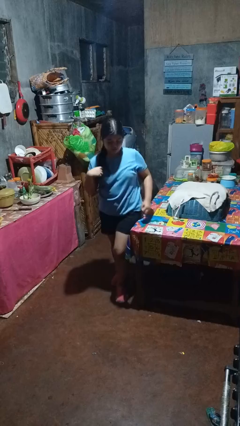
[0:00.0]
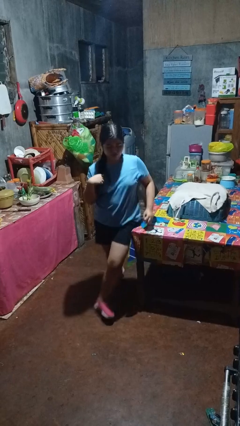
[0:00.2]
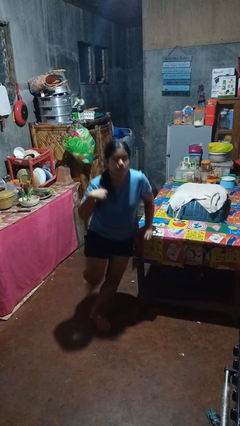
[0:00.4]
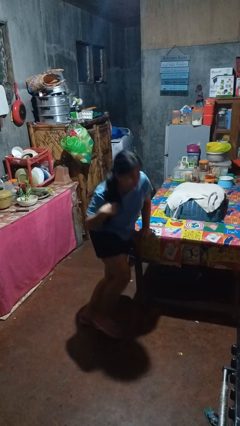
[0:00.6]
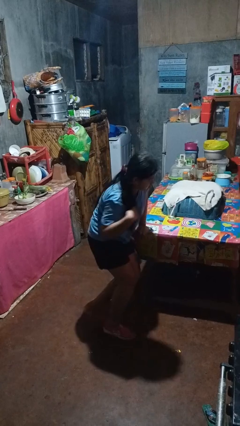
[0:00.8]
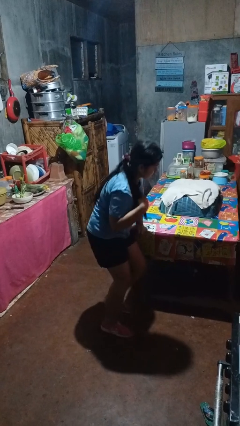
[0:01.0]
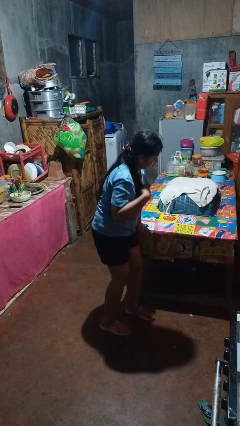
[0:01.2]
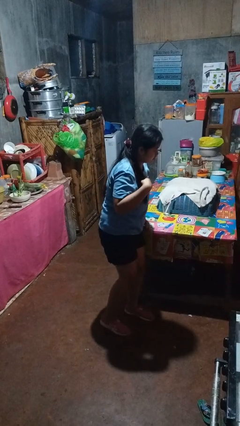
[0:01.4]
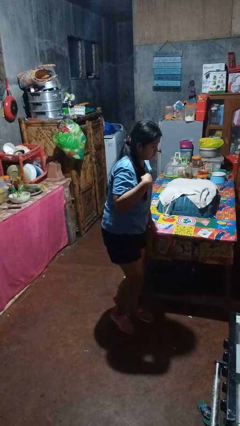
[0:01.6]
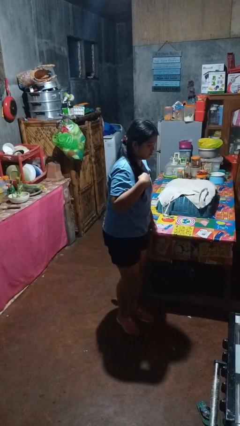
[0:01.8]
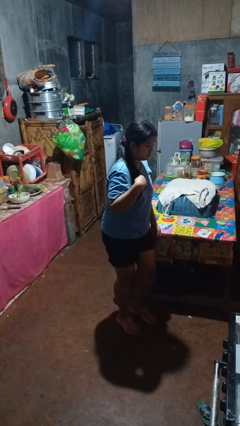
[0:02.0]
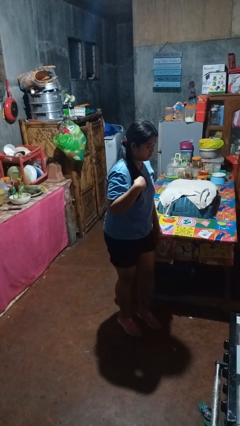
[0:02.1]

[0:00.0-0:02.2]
person bumps into table

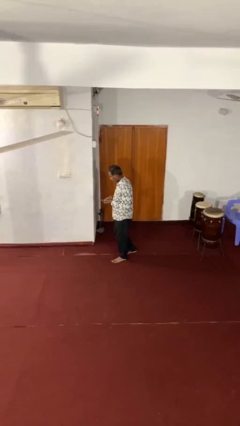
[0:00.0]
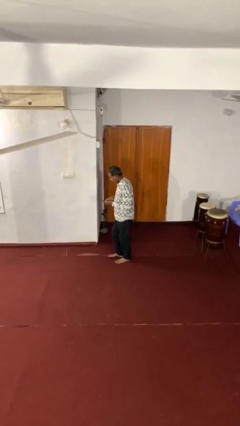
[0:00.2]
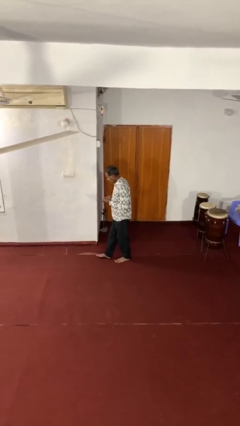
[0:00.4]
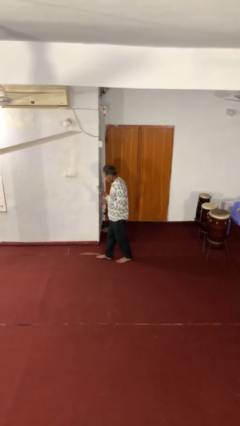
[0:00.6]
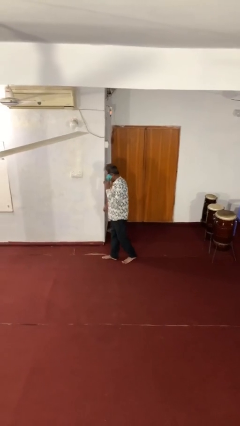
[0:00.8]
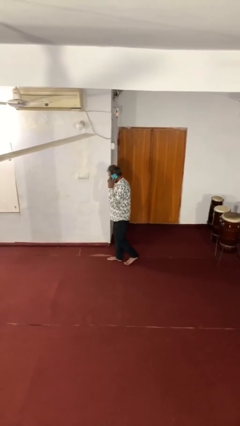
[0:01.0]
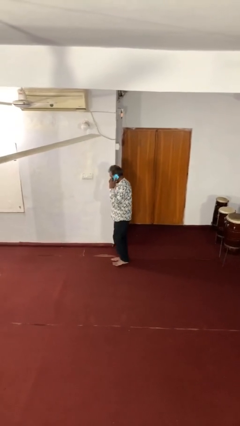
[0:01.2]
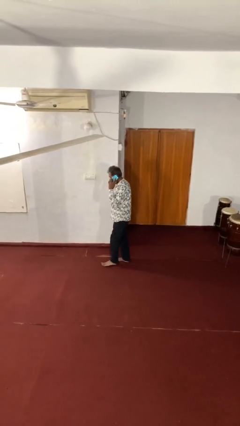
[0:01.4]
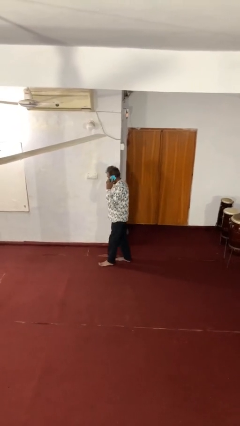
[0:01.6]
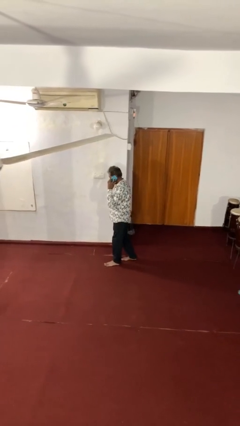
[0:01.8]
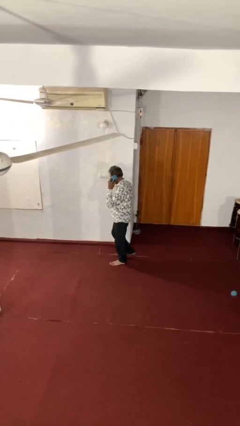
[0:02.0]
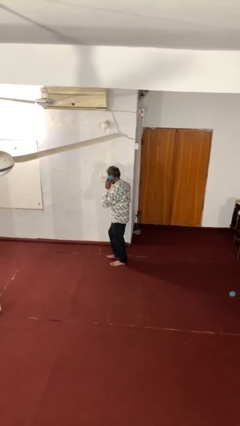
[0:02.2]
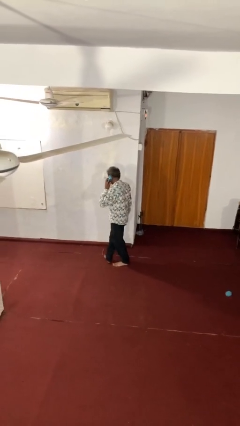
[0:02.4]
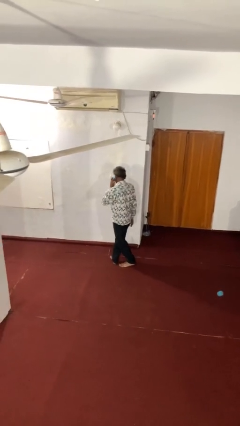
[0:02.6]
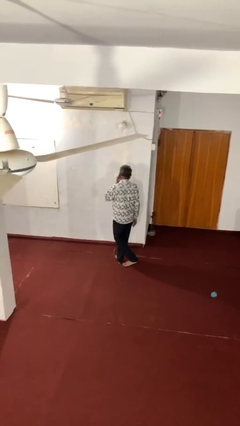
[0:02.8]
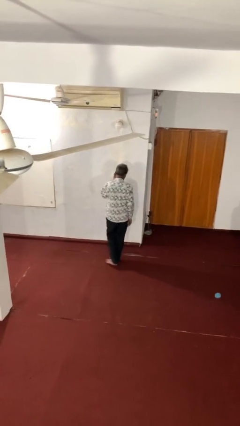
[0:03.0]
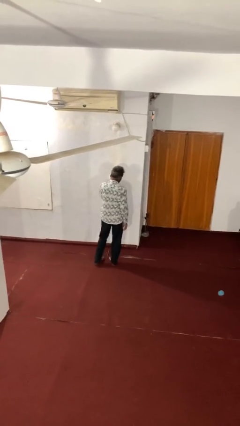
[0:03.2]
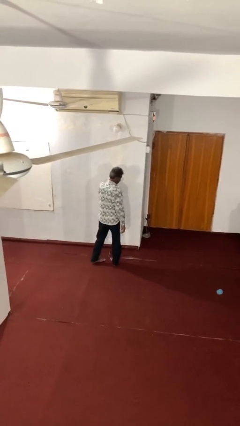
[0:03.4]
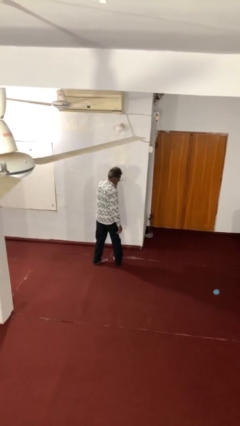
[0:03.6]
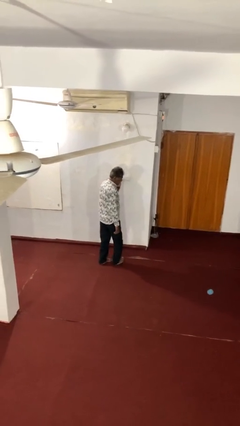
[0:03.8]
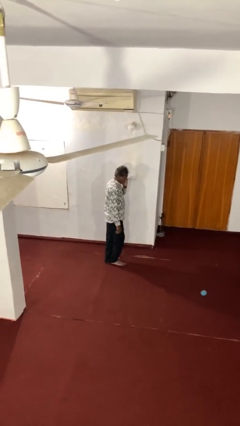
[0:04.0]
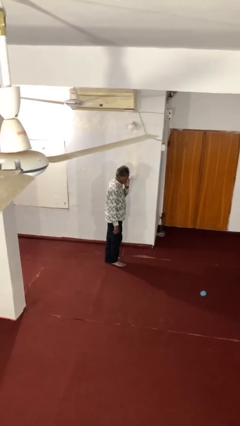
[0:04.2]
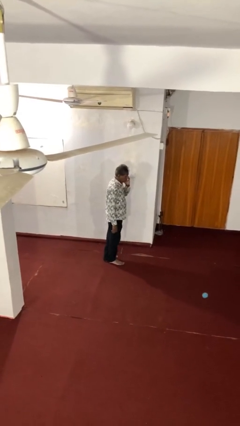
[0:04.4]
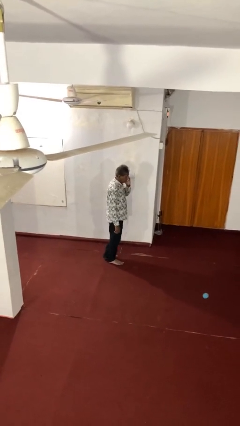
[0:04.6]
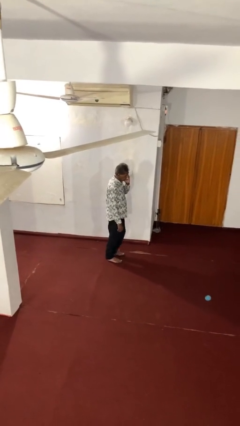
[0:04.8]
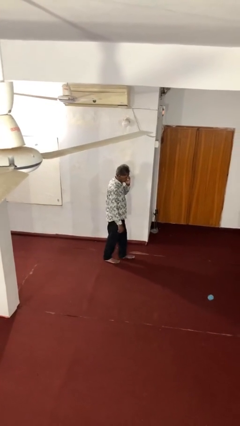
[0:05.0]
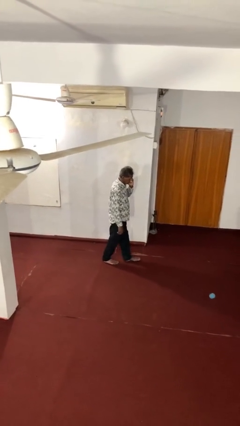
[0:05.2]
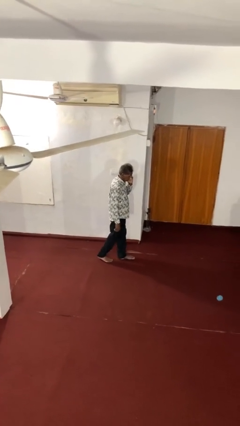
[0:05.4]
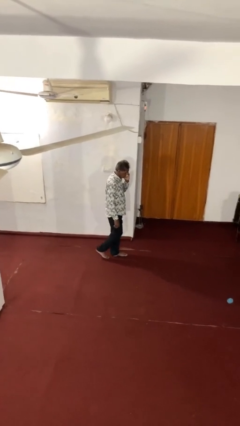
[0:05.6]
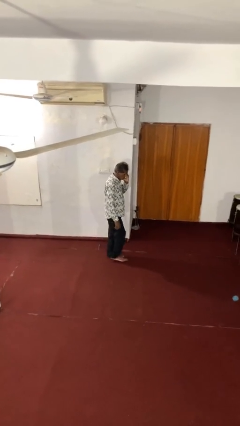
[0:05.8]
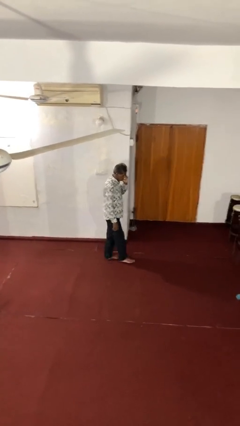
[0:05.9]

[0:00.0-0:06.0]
person talks on phone

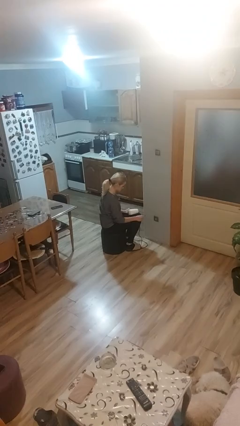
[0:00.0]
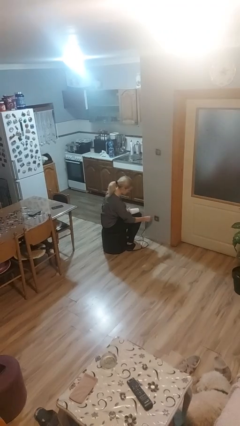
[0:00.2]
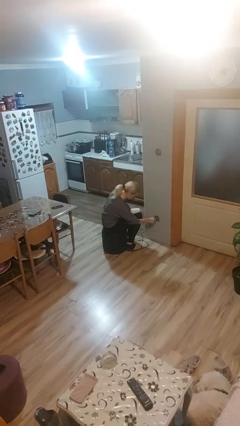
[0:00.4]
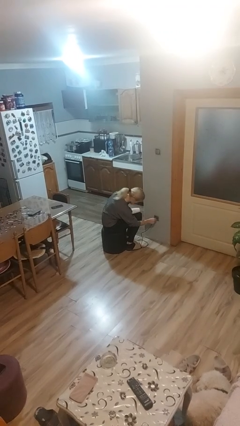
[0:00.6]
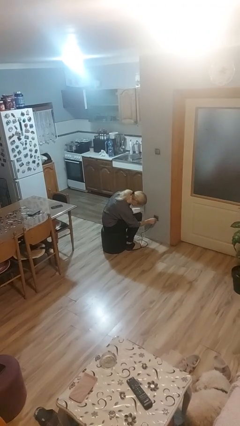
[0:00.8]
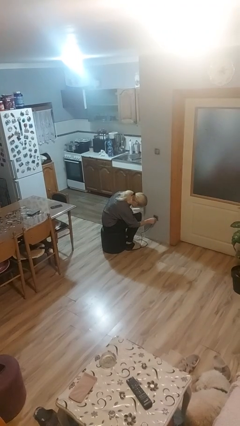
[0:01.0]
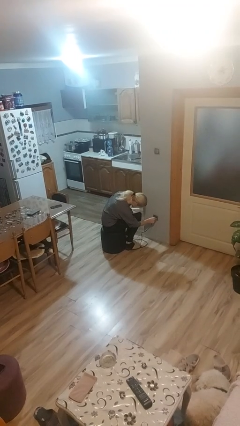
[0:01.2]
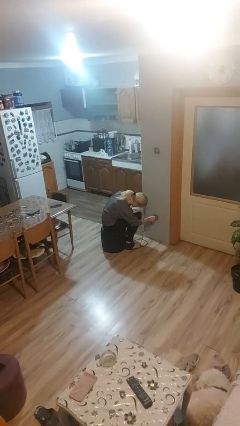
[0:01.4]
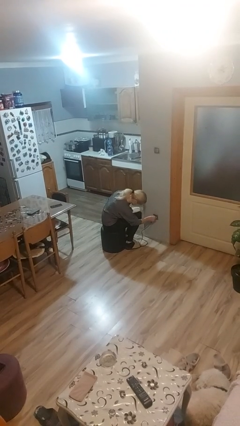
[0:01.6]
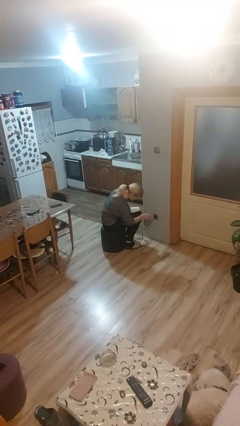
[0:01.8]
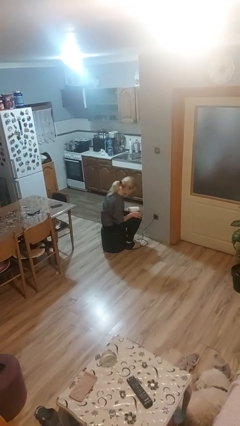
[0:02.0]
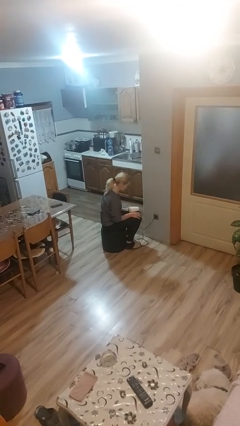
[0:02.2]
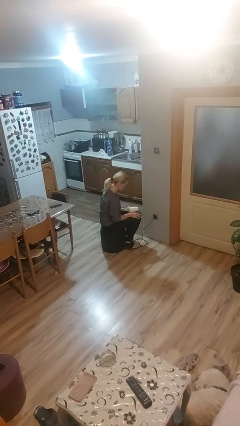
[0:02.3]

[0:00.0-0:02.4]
person plugs into electrical socket

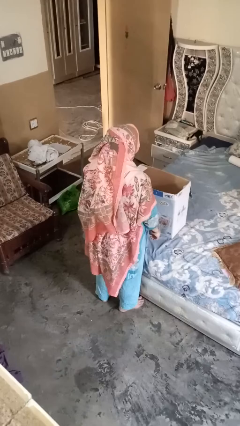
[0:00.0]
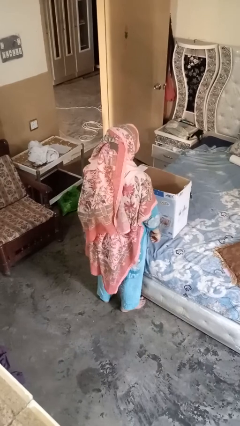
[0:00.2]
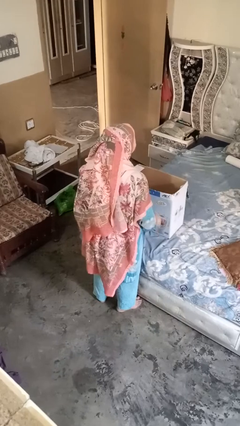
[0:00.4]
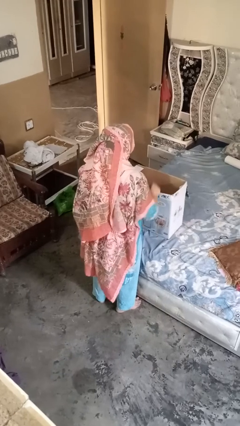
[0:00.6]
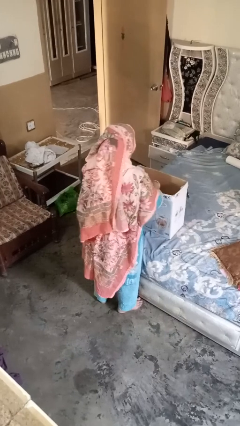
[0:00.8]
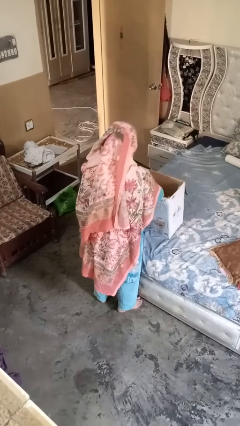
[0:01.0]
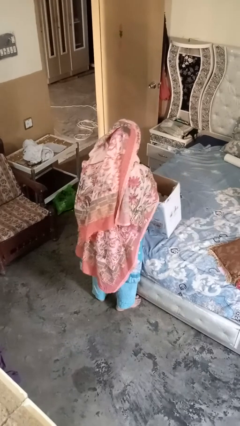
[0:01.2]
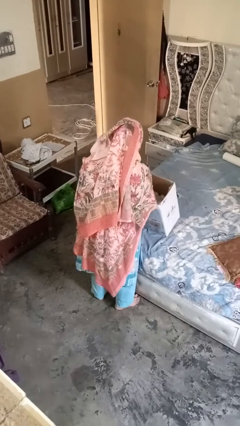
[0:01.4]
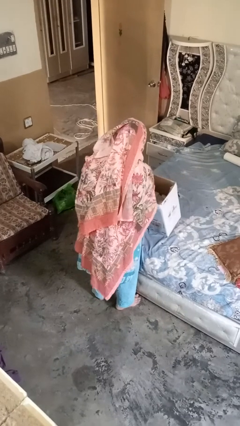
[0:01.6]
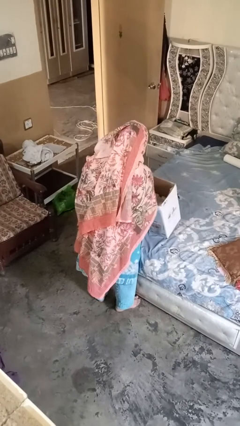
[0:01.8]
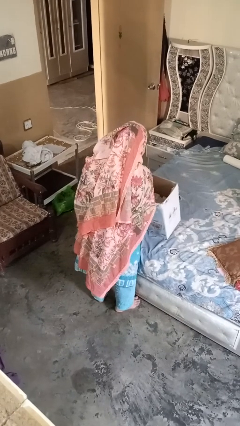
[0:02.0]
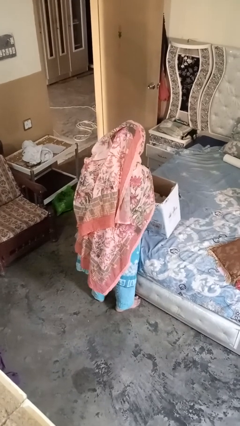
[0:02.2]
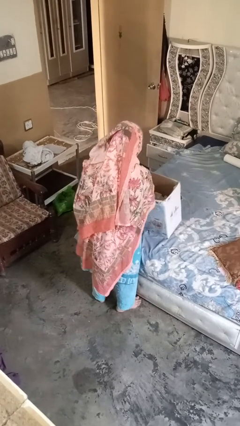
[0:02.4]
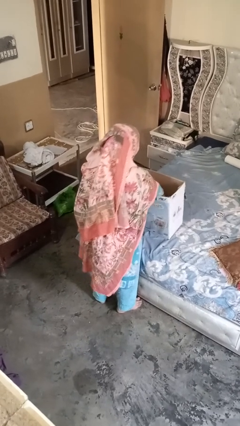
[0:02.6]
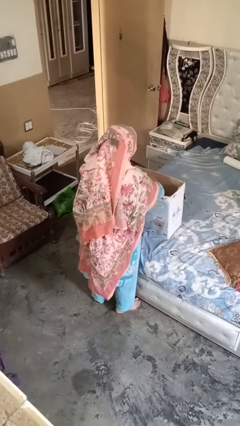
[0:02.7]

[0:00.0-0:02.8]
person searches in box

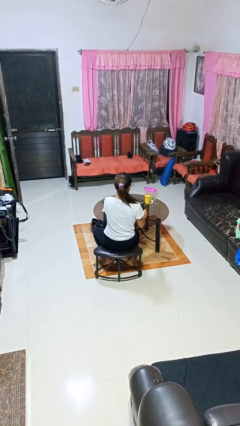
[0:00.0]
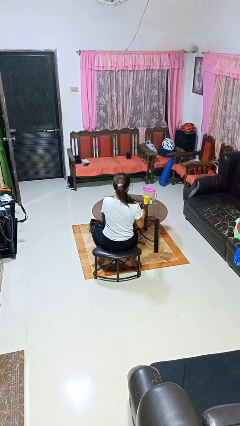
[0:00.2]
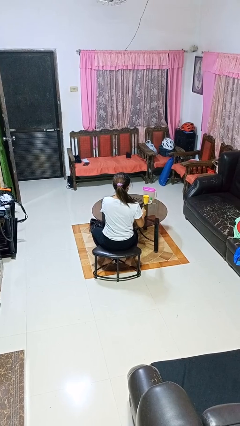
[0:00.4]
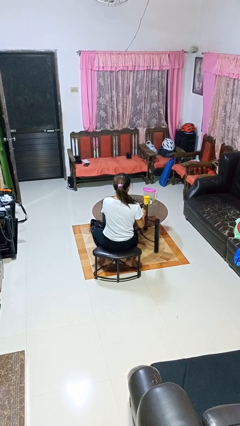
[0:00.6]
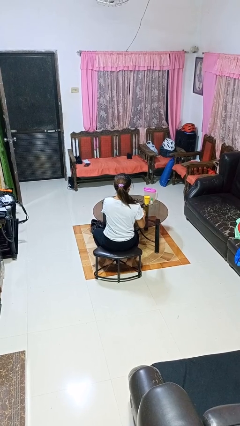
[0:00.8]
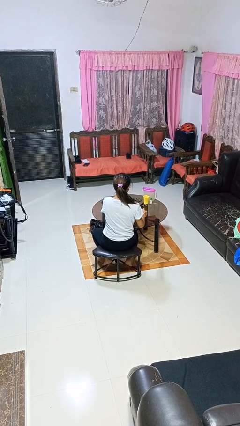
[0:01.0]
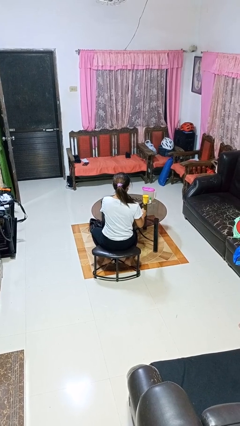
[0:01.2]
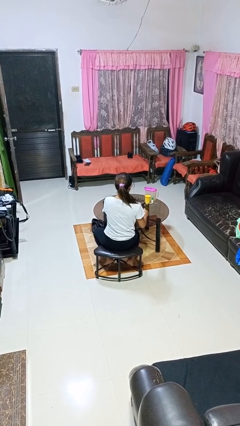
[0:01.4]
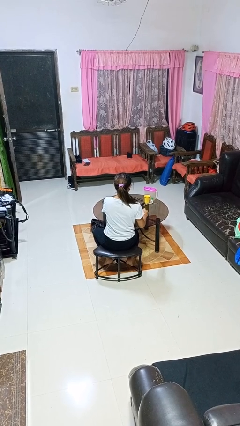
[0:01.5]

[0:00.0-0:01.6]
person stirs mug

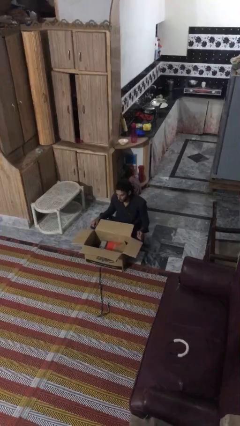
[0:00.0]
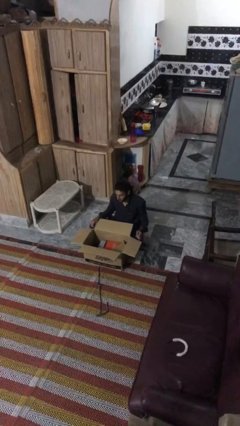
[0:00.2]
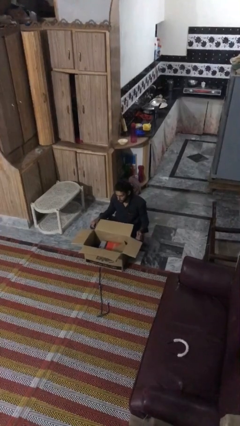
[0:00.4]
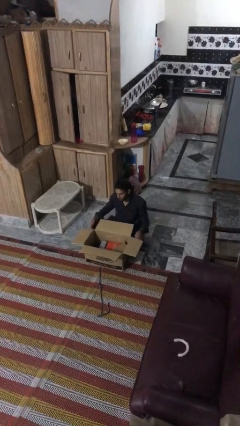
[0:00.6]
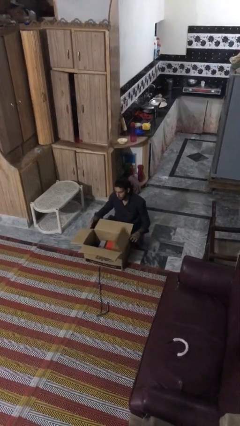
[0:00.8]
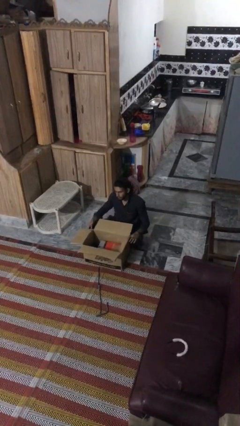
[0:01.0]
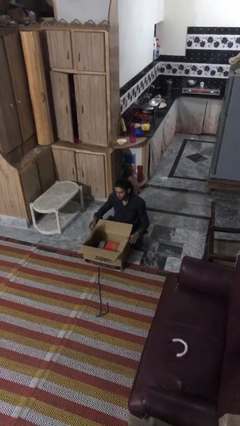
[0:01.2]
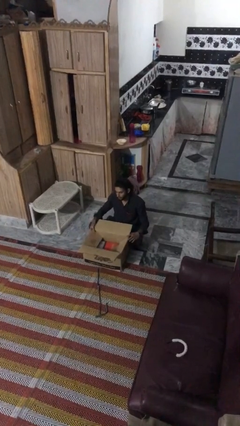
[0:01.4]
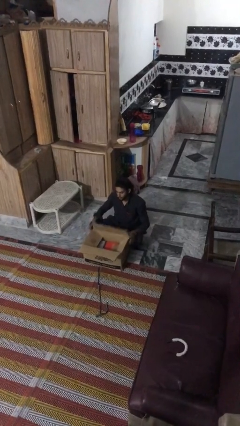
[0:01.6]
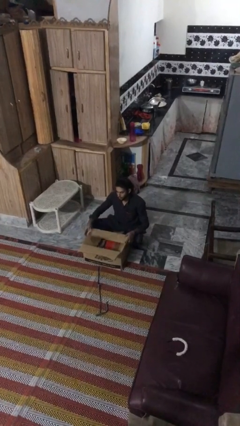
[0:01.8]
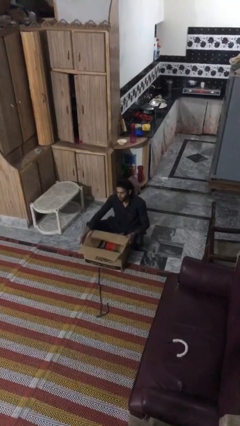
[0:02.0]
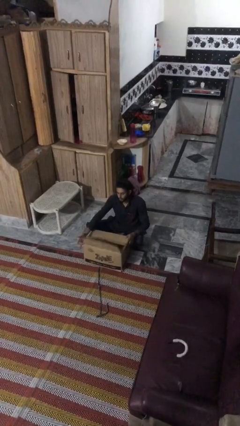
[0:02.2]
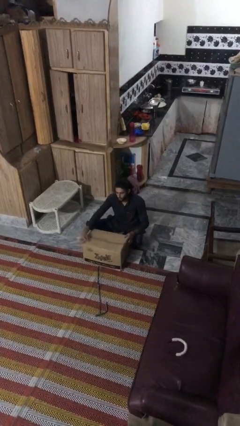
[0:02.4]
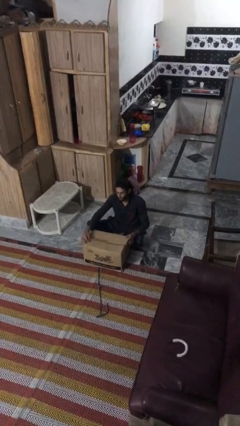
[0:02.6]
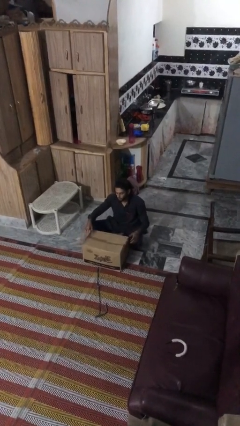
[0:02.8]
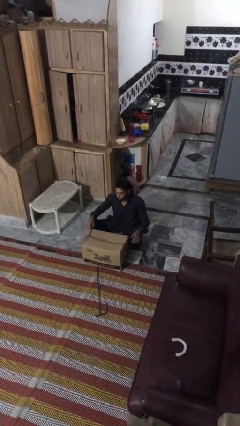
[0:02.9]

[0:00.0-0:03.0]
person closes box
